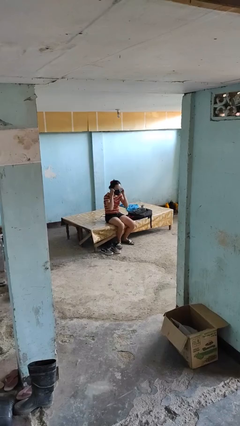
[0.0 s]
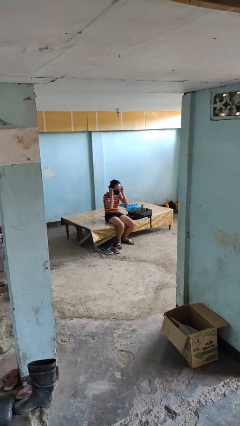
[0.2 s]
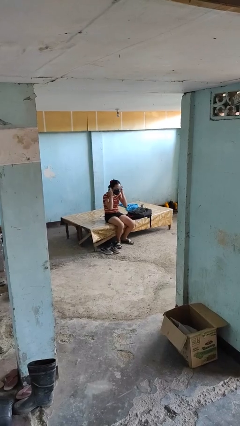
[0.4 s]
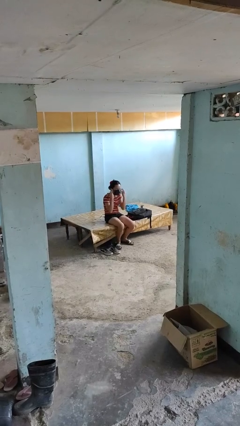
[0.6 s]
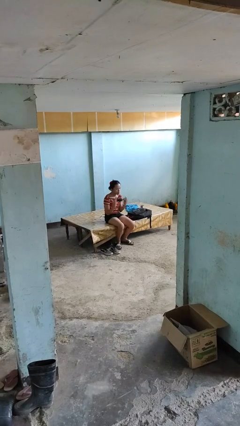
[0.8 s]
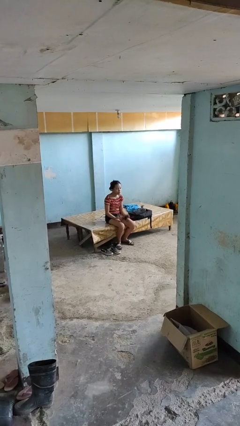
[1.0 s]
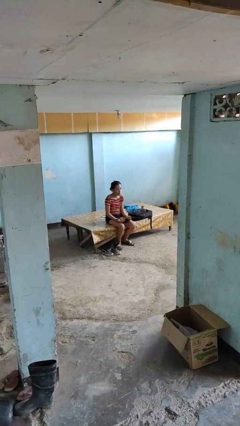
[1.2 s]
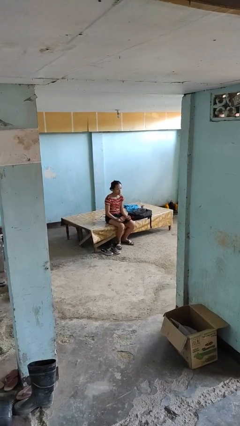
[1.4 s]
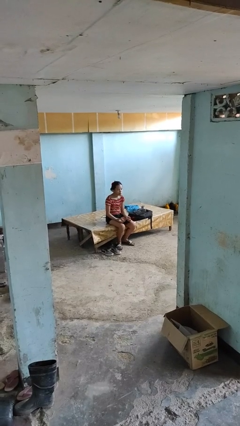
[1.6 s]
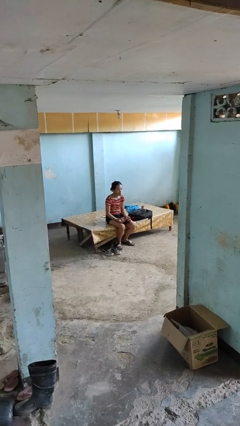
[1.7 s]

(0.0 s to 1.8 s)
person takes off facemask

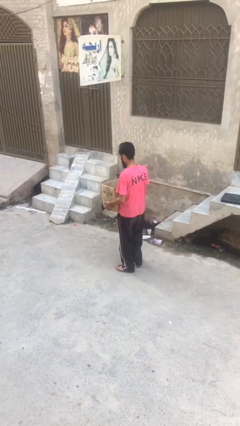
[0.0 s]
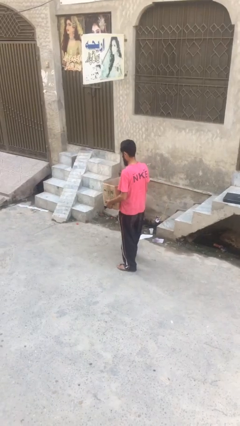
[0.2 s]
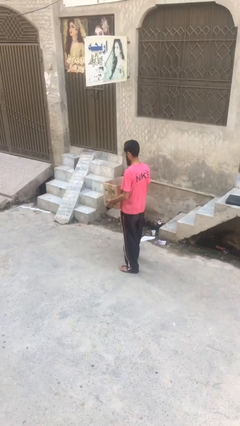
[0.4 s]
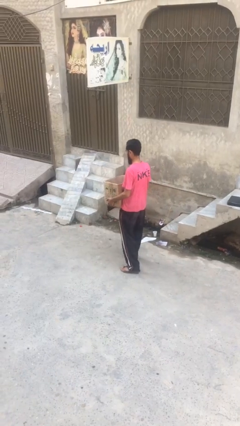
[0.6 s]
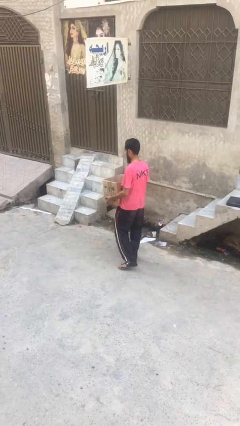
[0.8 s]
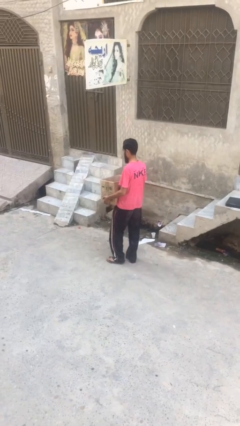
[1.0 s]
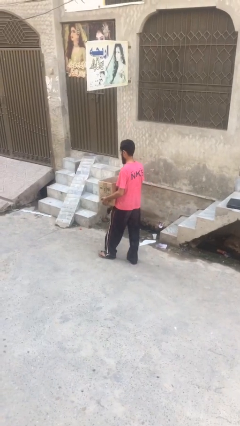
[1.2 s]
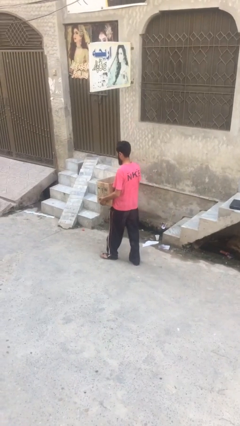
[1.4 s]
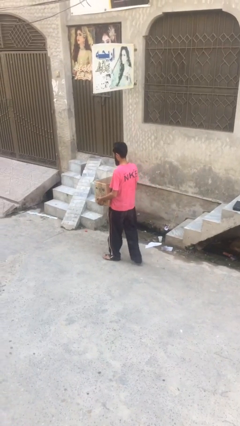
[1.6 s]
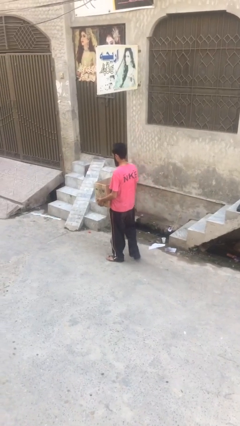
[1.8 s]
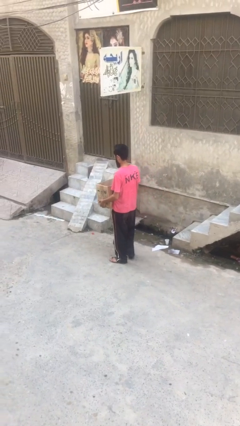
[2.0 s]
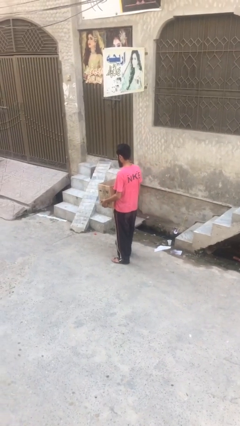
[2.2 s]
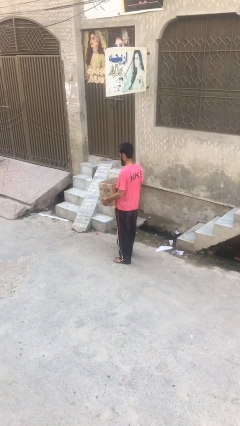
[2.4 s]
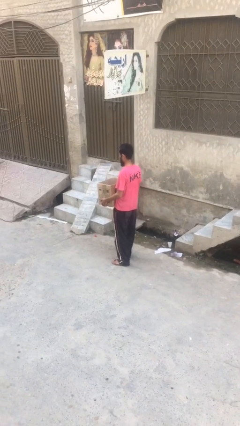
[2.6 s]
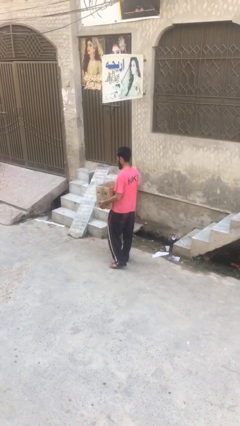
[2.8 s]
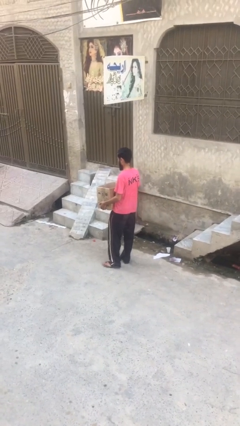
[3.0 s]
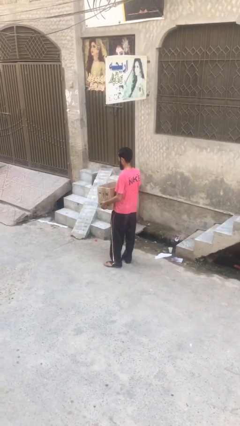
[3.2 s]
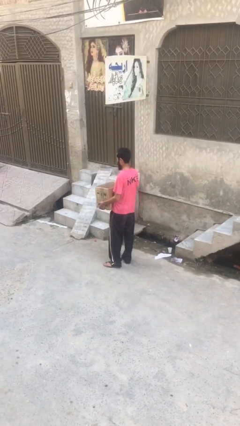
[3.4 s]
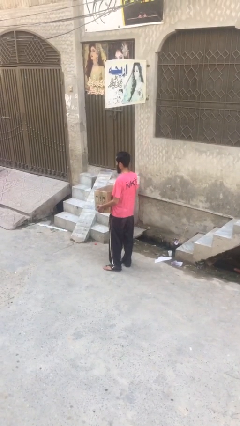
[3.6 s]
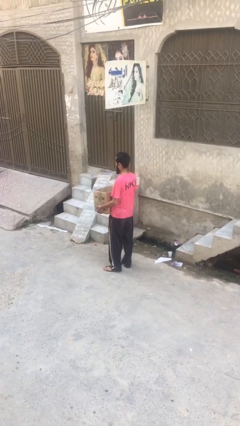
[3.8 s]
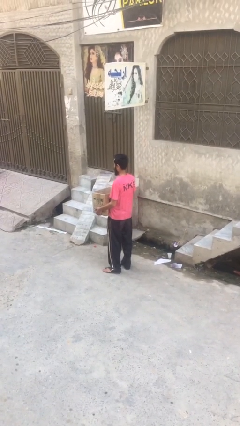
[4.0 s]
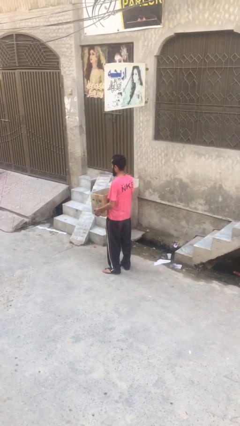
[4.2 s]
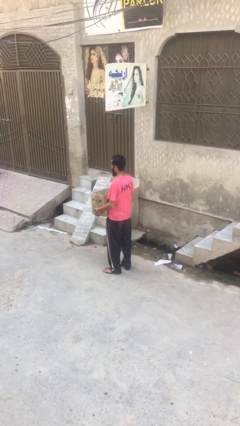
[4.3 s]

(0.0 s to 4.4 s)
person puts down object on floor

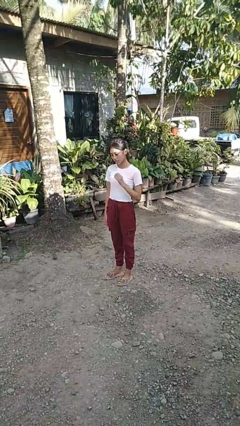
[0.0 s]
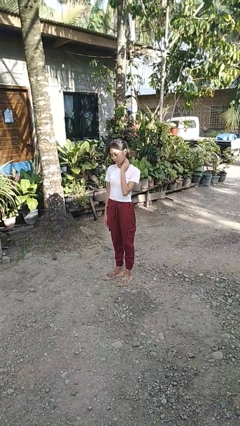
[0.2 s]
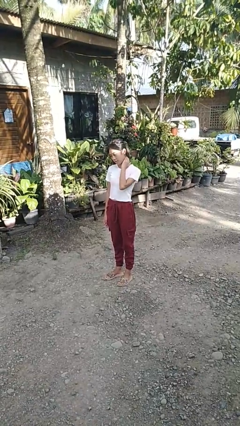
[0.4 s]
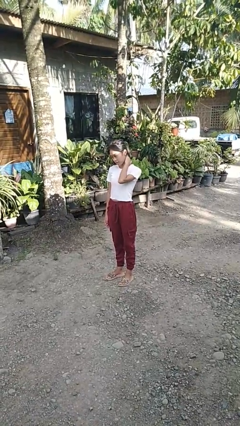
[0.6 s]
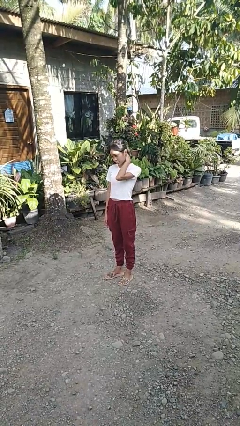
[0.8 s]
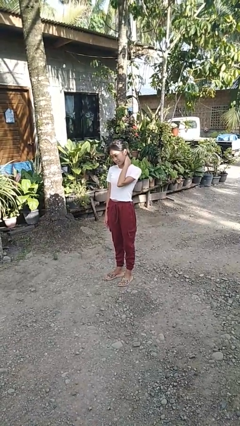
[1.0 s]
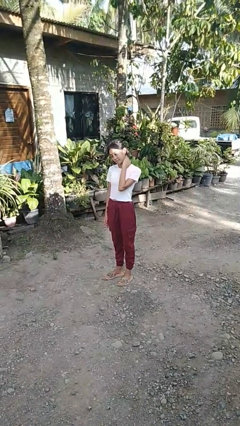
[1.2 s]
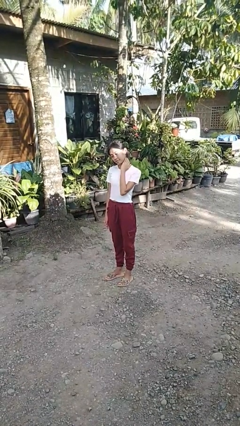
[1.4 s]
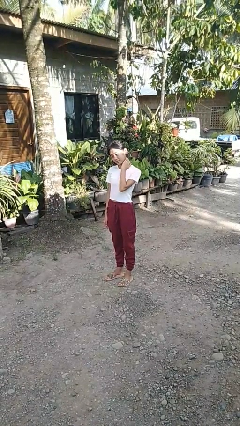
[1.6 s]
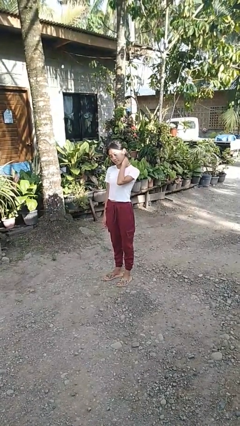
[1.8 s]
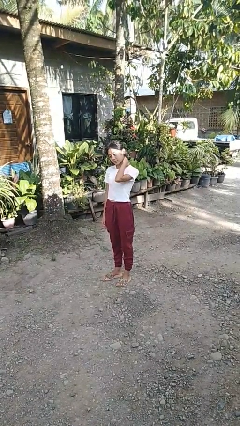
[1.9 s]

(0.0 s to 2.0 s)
person rubs neck

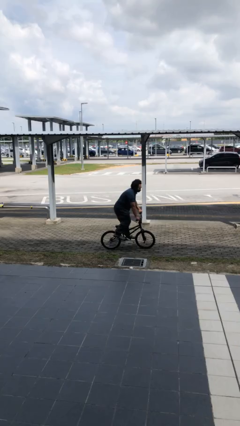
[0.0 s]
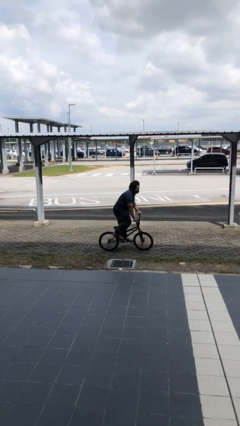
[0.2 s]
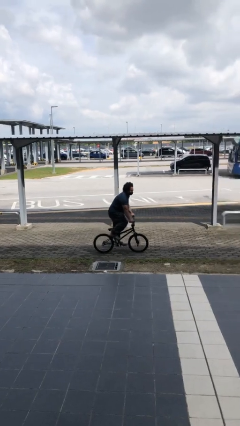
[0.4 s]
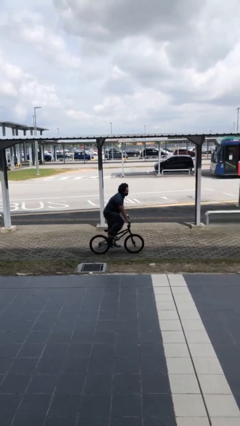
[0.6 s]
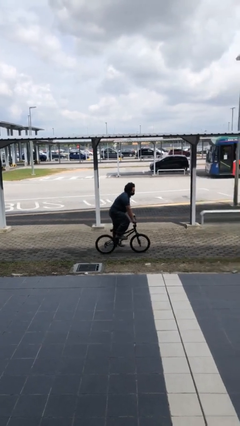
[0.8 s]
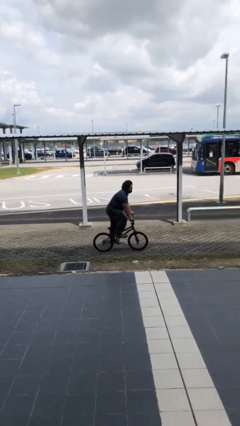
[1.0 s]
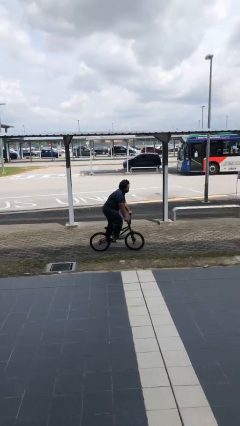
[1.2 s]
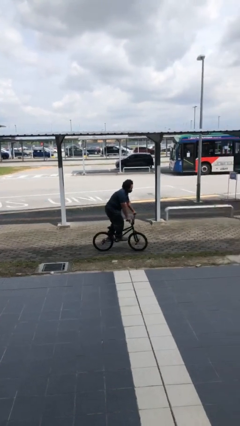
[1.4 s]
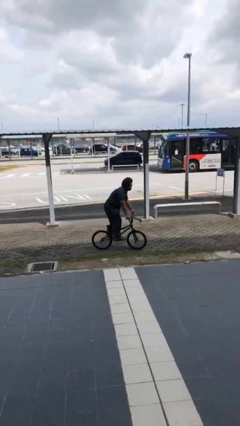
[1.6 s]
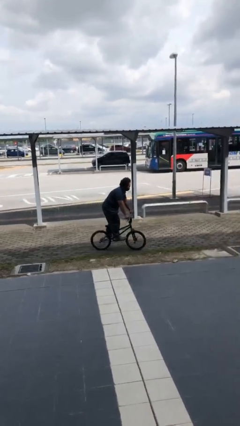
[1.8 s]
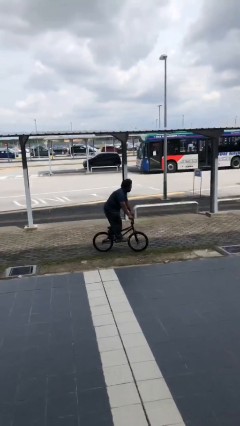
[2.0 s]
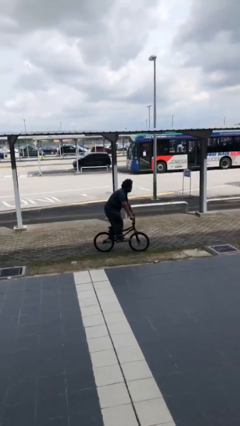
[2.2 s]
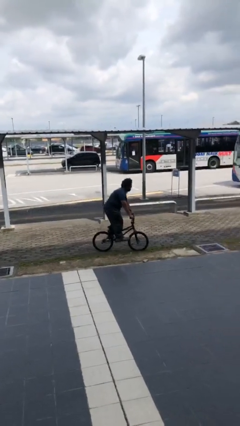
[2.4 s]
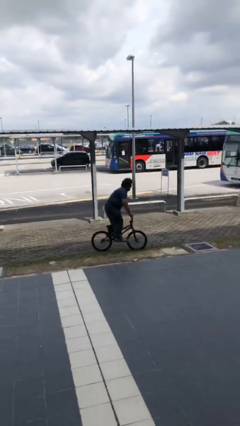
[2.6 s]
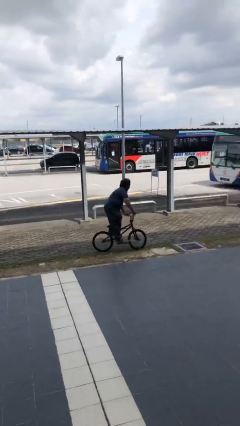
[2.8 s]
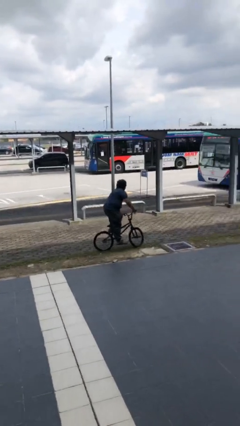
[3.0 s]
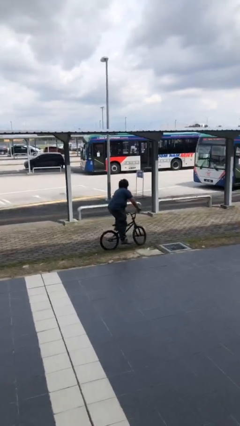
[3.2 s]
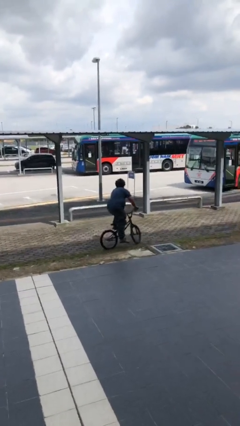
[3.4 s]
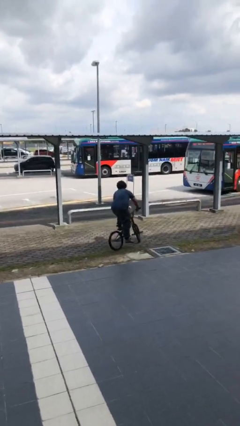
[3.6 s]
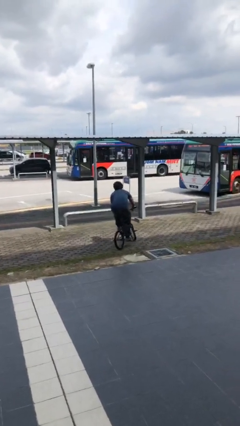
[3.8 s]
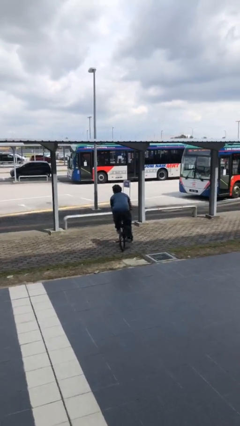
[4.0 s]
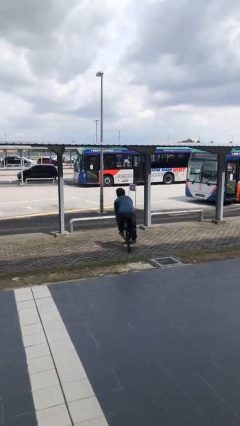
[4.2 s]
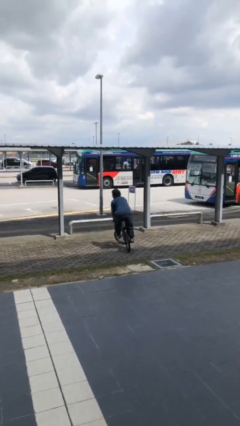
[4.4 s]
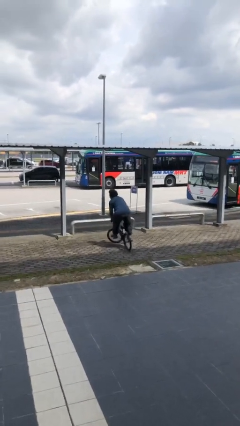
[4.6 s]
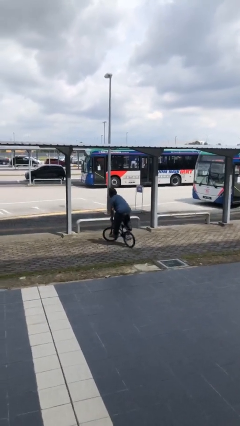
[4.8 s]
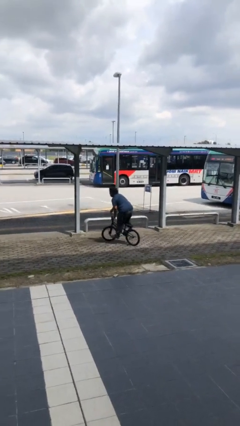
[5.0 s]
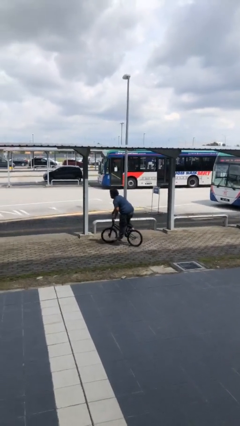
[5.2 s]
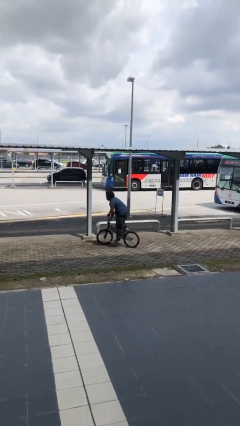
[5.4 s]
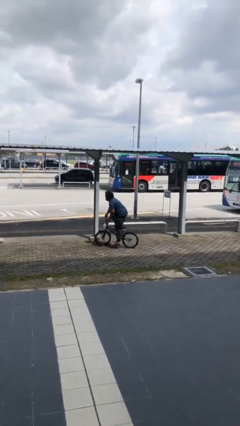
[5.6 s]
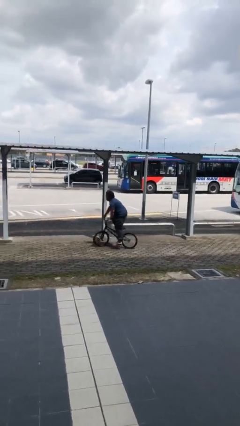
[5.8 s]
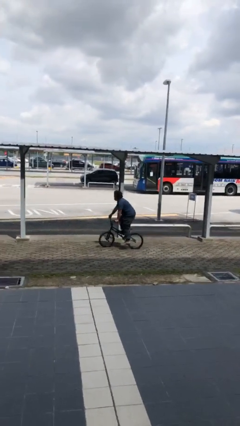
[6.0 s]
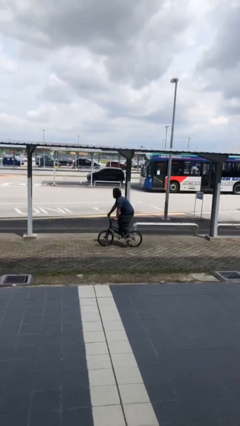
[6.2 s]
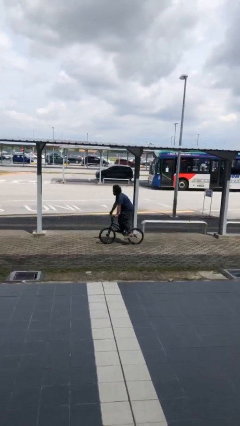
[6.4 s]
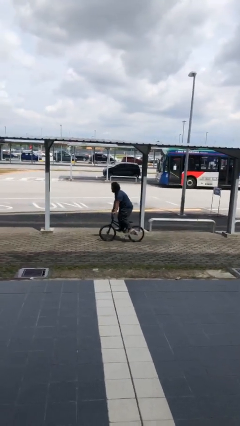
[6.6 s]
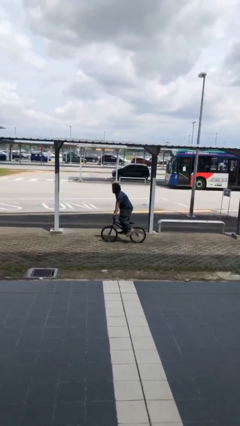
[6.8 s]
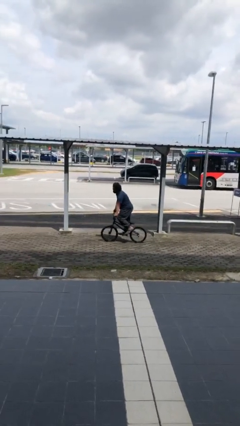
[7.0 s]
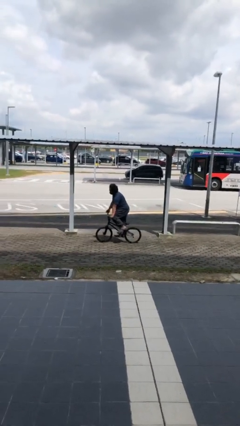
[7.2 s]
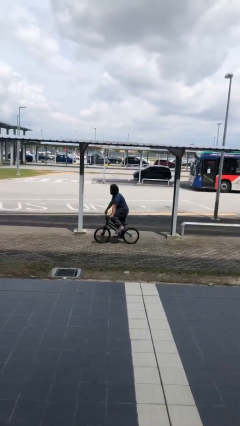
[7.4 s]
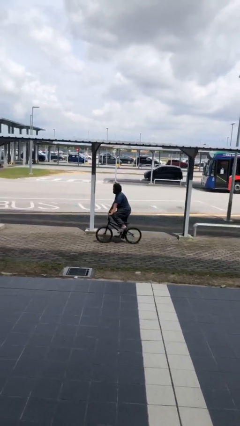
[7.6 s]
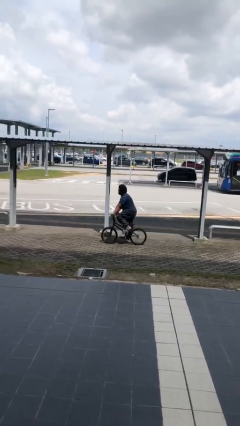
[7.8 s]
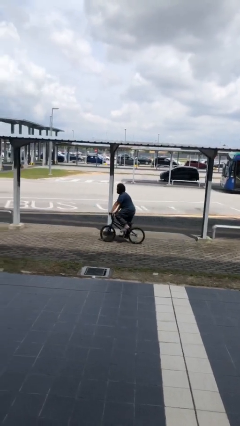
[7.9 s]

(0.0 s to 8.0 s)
person rides bicycle

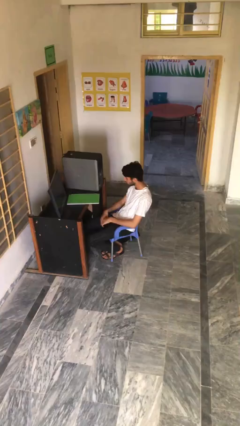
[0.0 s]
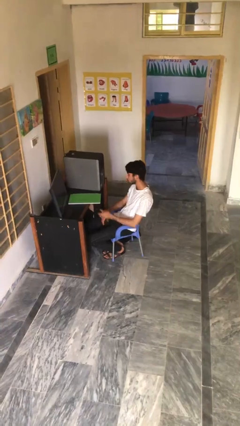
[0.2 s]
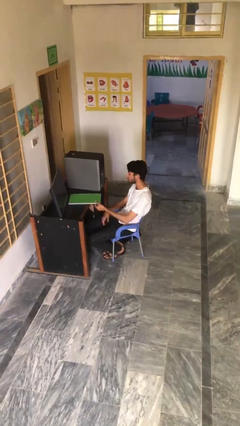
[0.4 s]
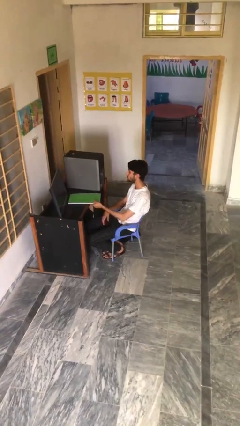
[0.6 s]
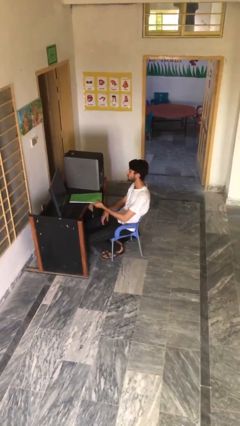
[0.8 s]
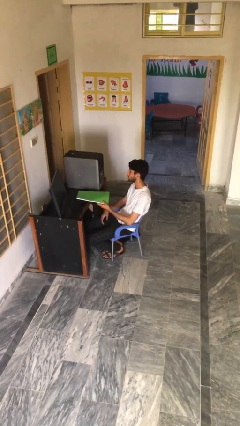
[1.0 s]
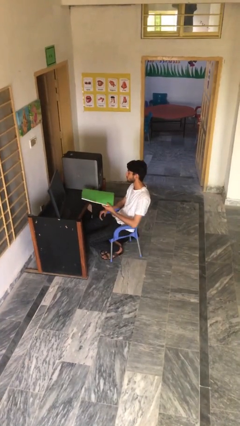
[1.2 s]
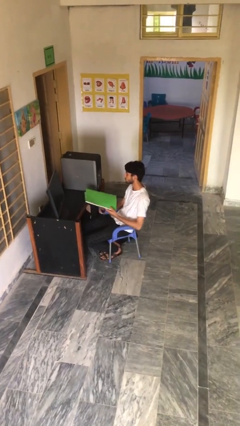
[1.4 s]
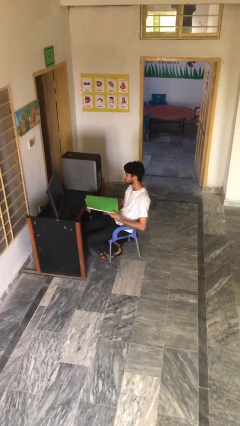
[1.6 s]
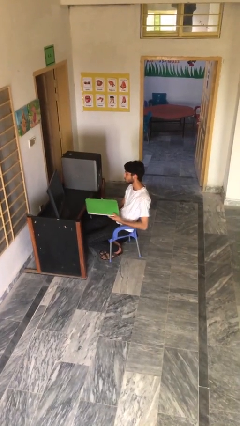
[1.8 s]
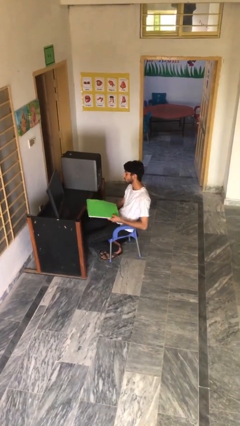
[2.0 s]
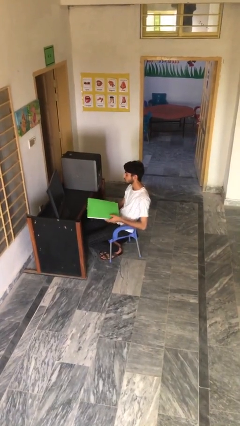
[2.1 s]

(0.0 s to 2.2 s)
person picks up object from table
